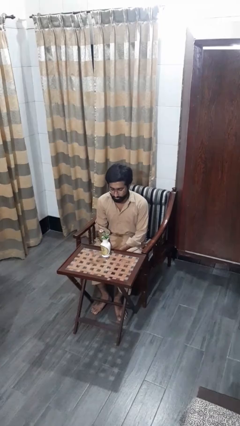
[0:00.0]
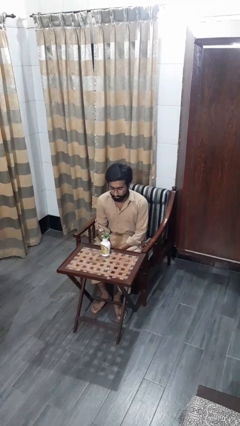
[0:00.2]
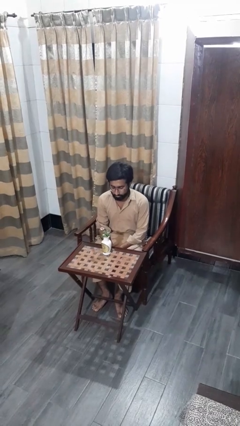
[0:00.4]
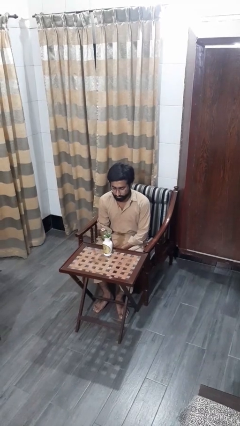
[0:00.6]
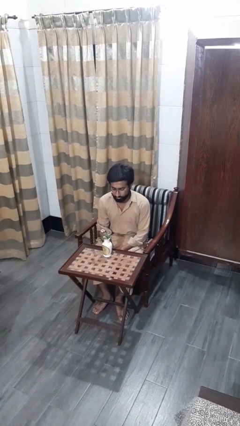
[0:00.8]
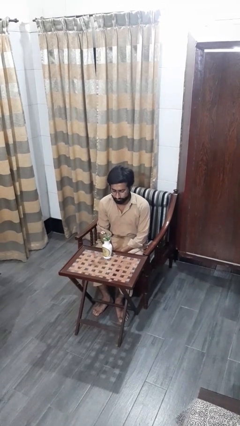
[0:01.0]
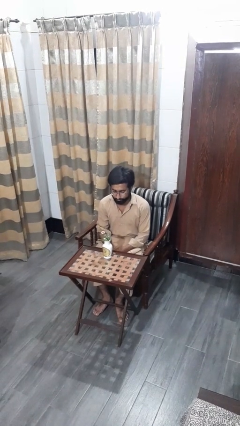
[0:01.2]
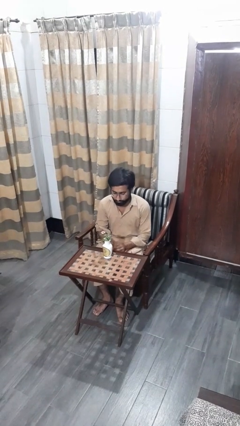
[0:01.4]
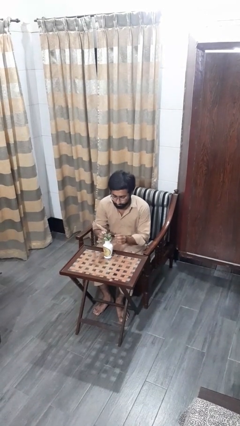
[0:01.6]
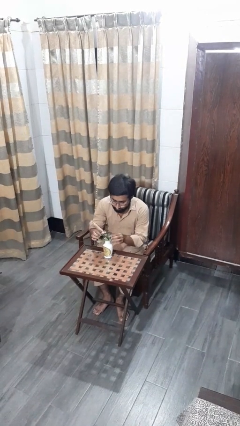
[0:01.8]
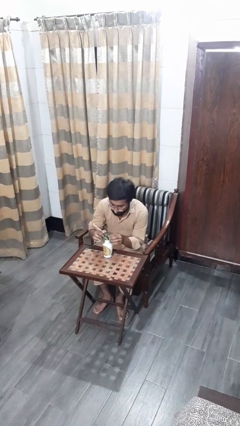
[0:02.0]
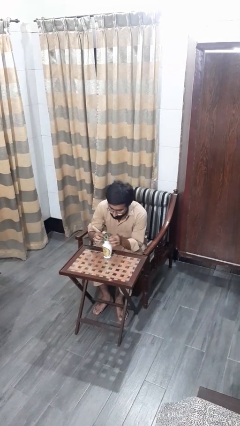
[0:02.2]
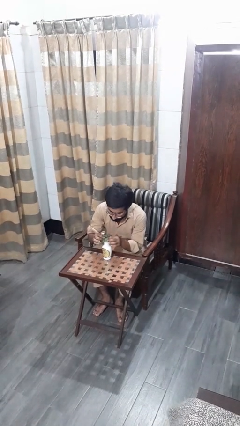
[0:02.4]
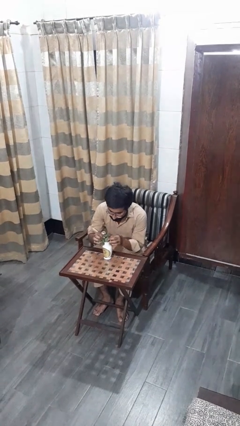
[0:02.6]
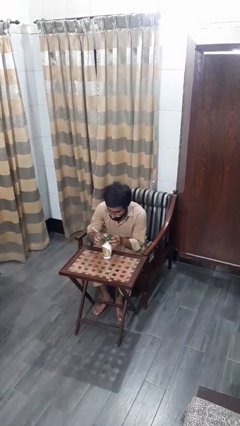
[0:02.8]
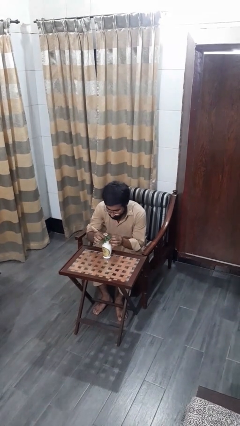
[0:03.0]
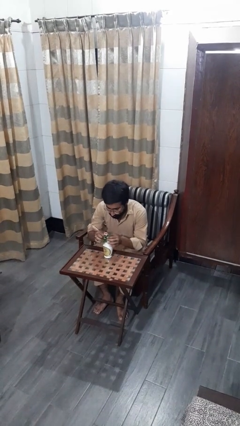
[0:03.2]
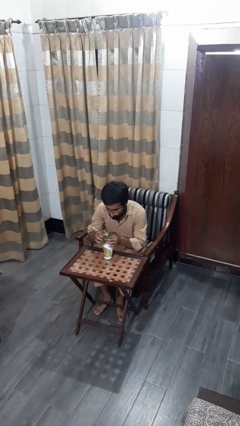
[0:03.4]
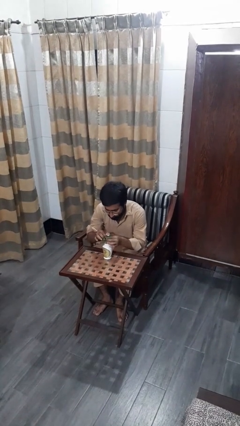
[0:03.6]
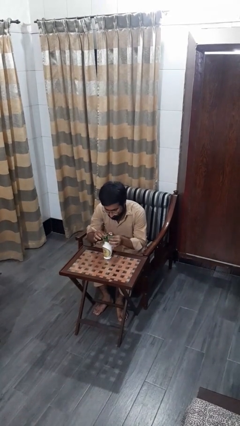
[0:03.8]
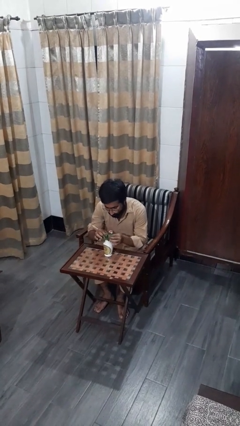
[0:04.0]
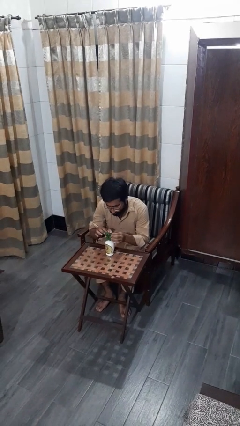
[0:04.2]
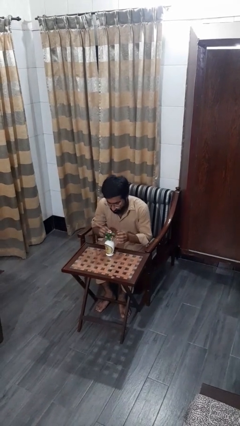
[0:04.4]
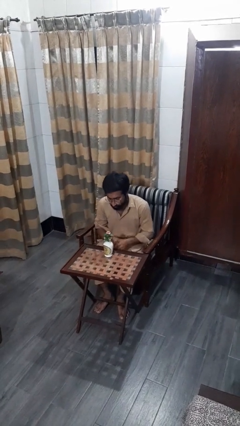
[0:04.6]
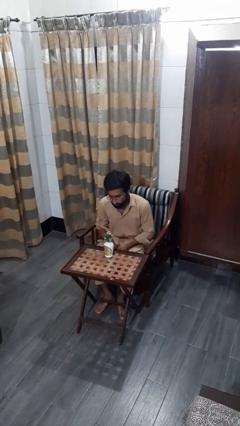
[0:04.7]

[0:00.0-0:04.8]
person arranges flowers in vase

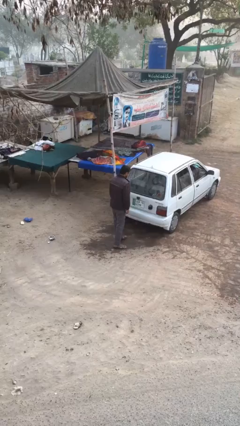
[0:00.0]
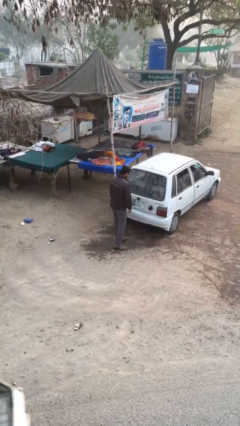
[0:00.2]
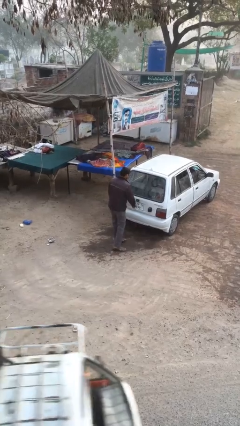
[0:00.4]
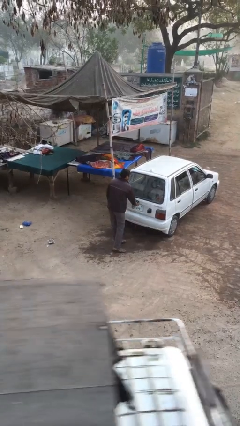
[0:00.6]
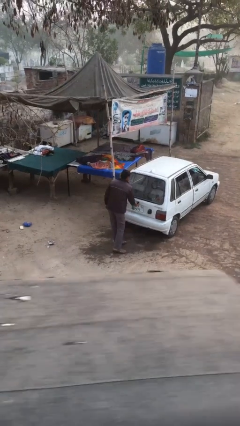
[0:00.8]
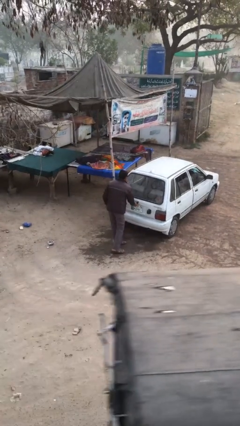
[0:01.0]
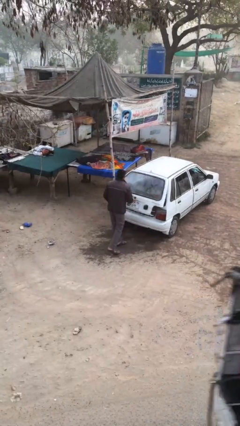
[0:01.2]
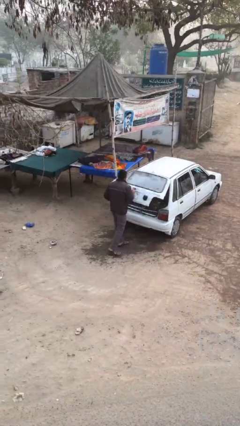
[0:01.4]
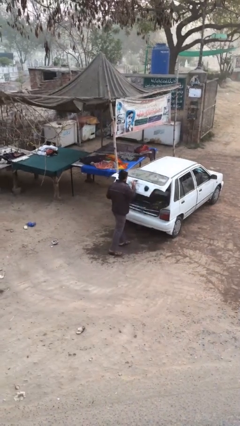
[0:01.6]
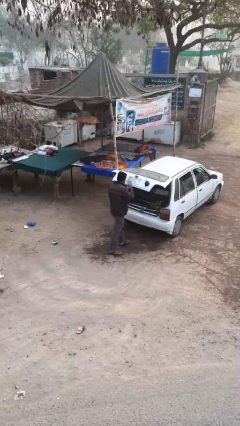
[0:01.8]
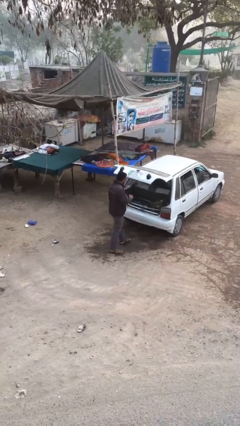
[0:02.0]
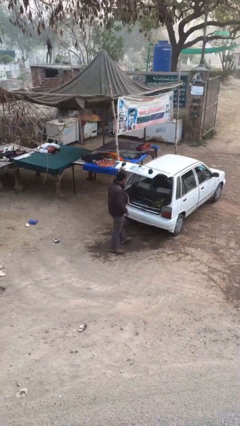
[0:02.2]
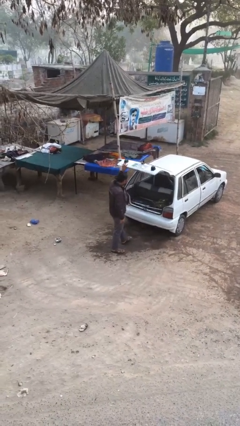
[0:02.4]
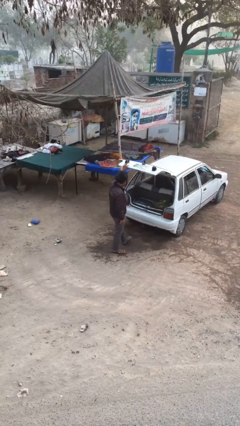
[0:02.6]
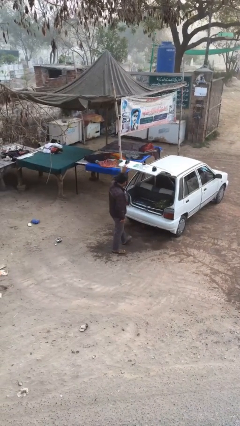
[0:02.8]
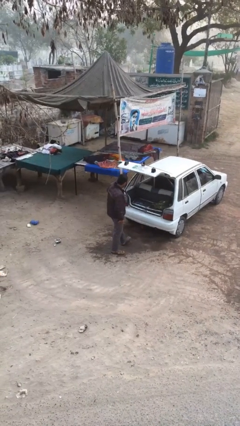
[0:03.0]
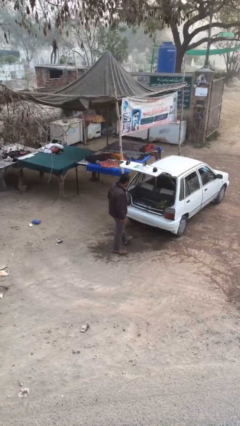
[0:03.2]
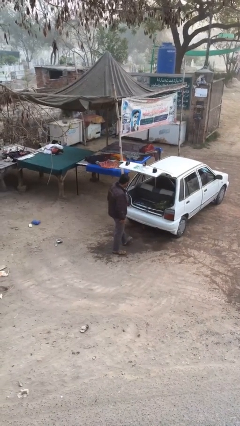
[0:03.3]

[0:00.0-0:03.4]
person opens car trunk

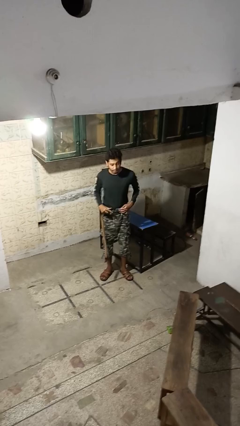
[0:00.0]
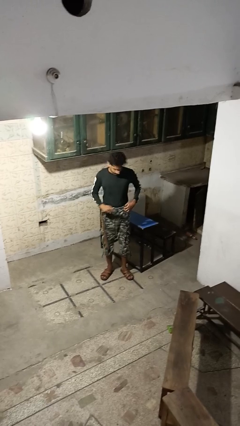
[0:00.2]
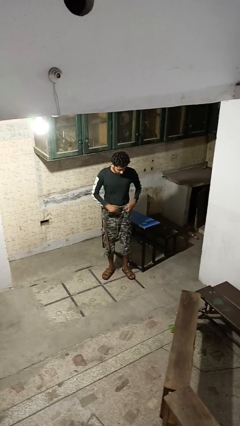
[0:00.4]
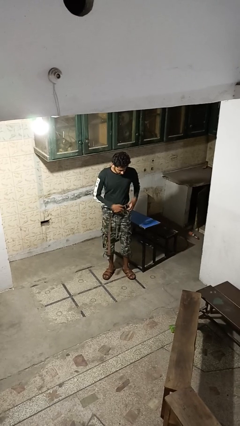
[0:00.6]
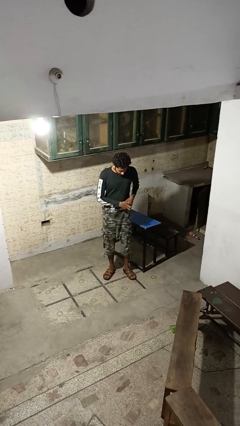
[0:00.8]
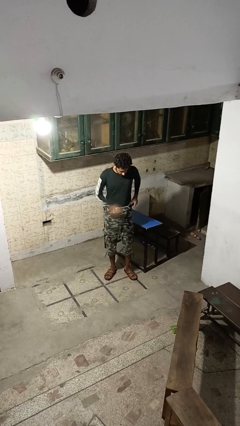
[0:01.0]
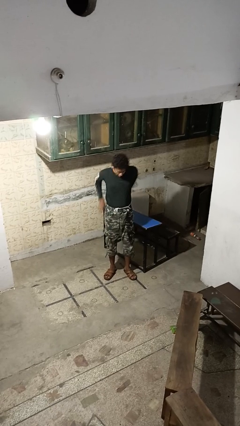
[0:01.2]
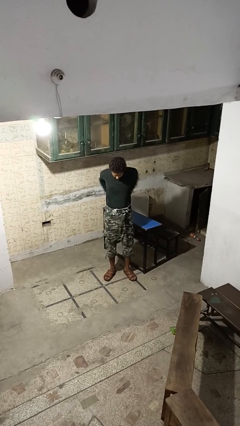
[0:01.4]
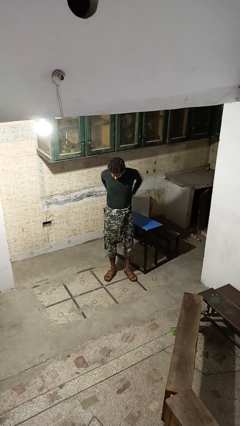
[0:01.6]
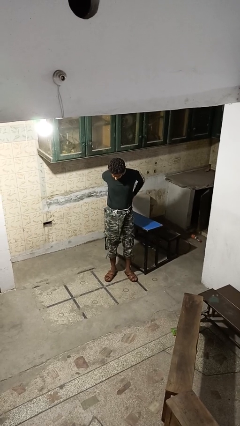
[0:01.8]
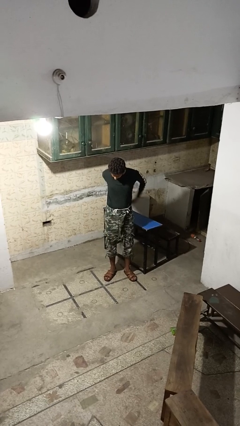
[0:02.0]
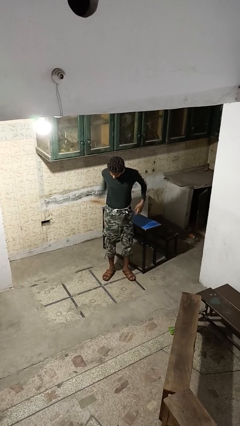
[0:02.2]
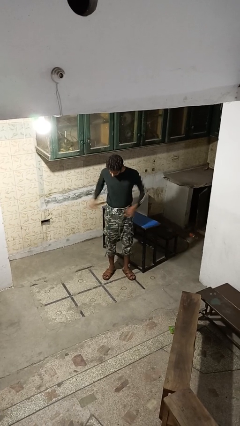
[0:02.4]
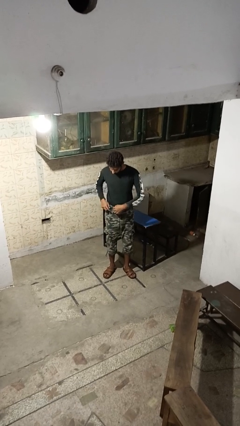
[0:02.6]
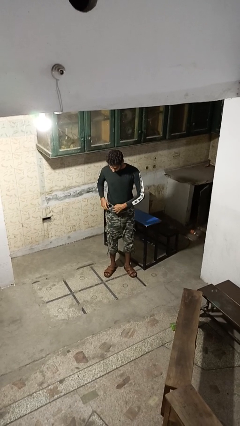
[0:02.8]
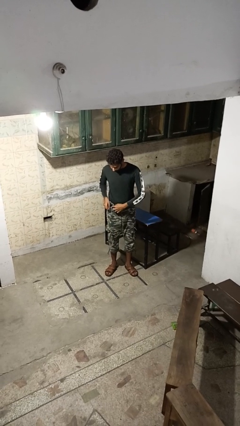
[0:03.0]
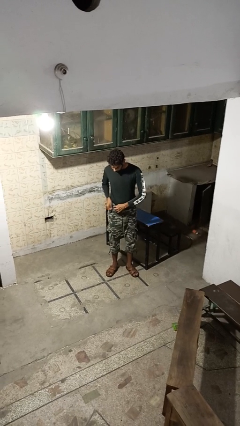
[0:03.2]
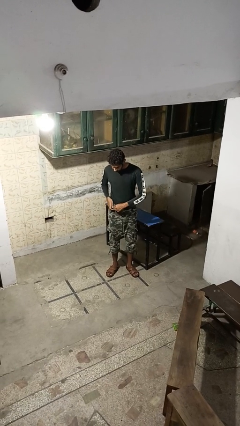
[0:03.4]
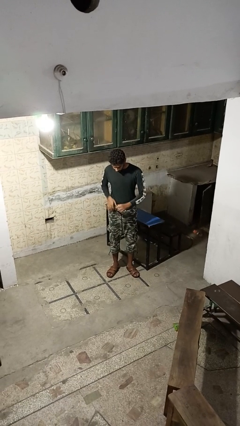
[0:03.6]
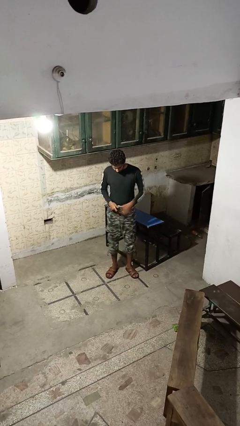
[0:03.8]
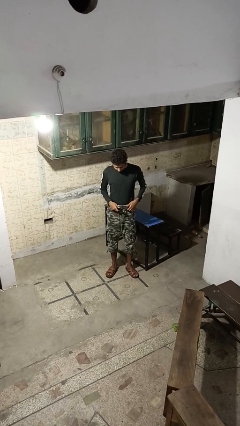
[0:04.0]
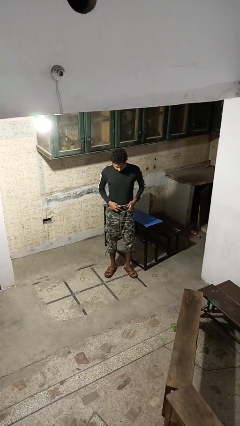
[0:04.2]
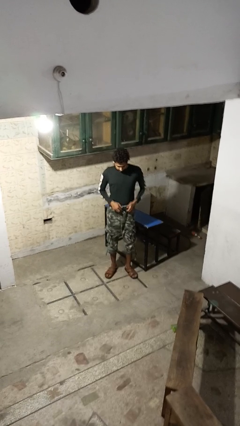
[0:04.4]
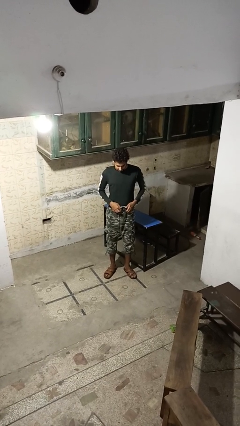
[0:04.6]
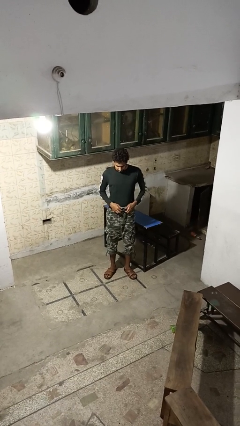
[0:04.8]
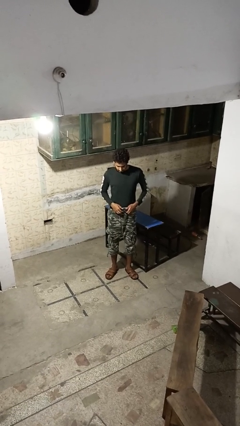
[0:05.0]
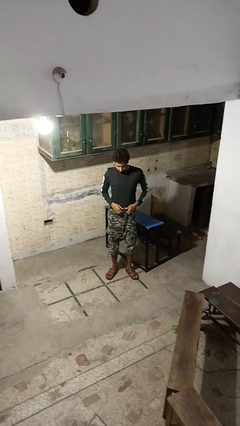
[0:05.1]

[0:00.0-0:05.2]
person puts on belt

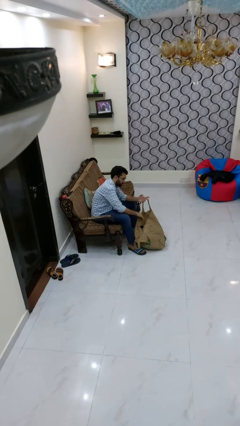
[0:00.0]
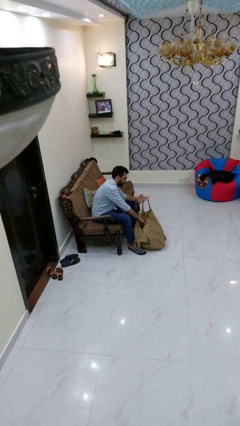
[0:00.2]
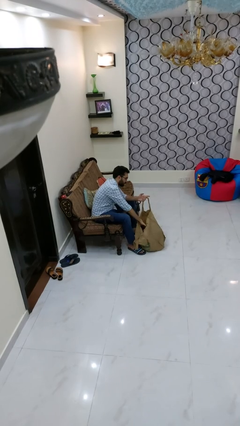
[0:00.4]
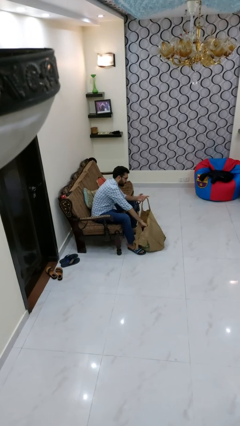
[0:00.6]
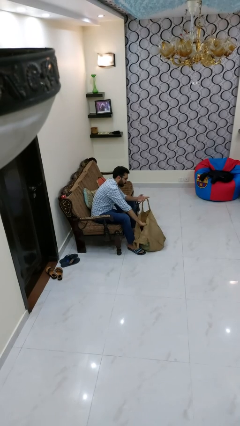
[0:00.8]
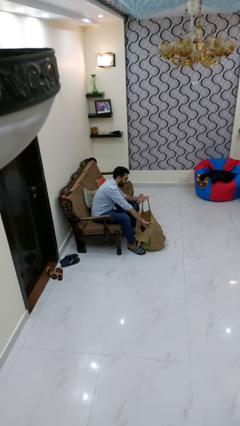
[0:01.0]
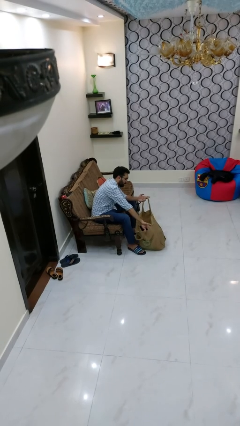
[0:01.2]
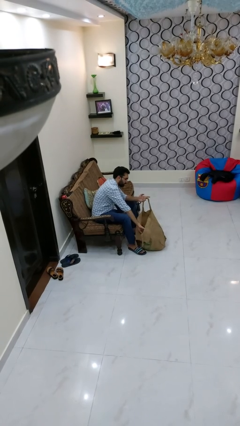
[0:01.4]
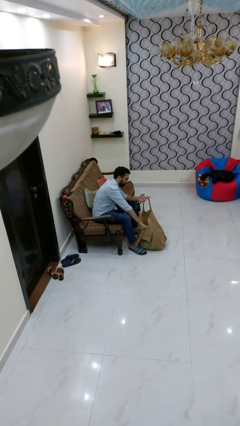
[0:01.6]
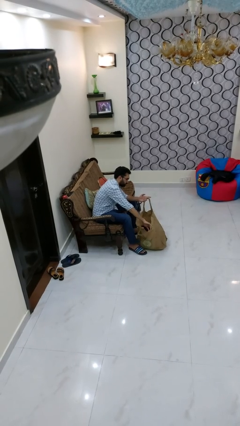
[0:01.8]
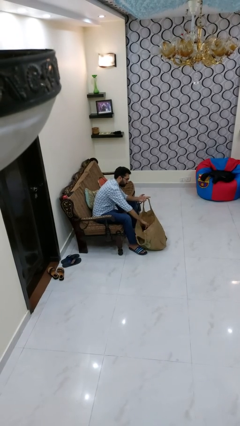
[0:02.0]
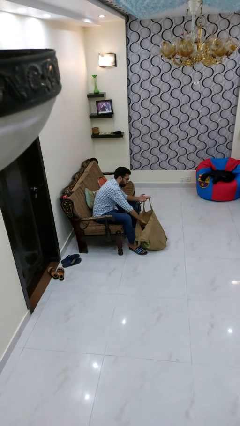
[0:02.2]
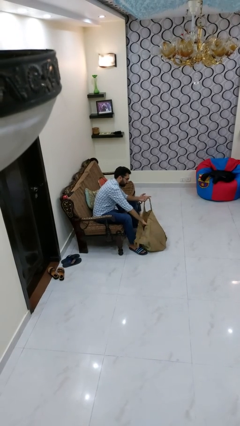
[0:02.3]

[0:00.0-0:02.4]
person searches in bag

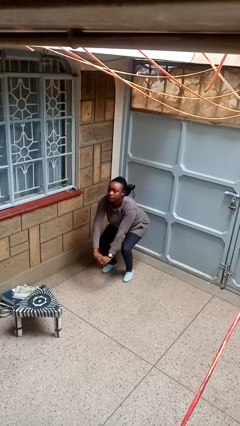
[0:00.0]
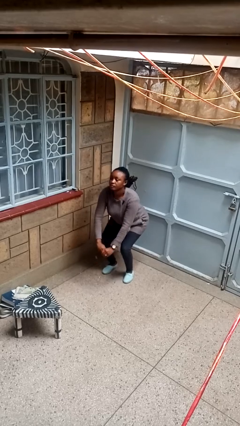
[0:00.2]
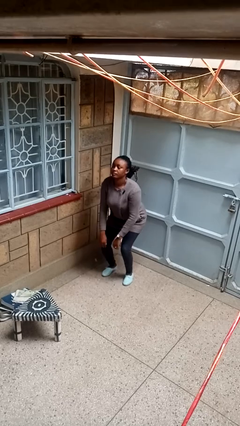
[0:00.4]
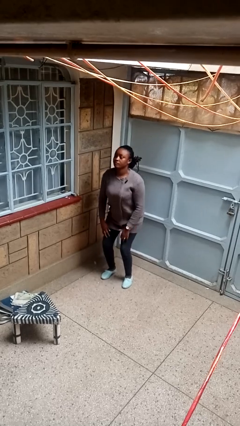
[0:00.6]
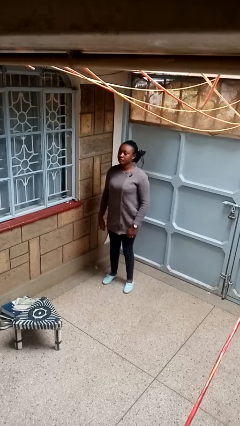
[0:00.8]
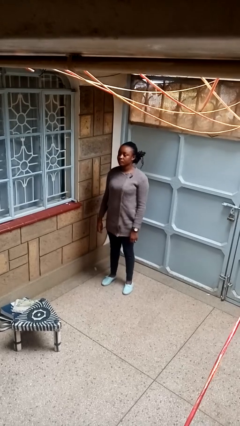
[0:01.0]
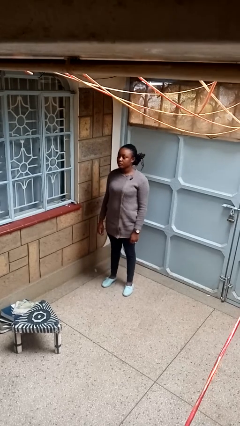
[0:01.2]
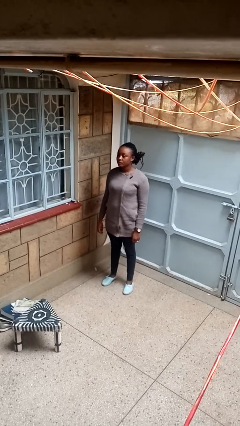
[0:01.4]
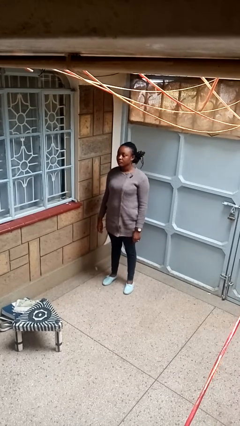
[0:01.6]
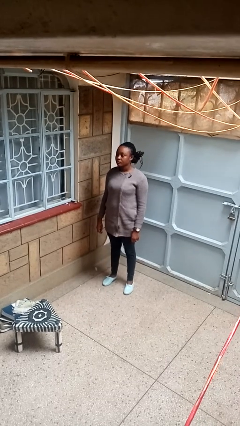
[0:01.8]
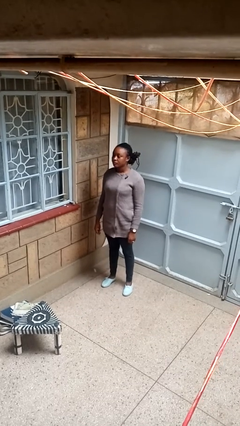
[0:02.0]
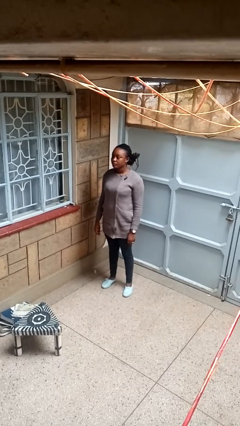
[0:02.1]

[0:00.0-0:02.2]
person stands up
